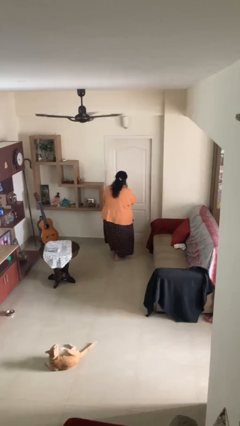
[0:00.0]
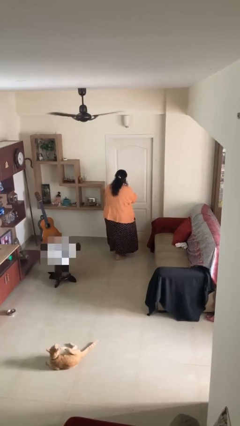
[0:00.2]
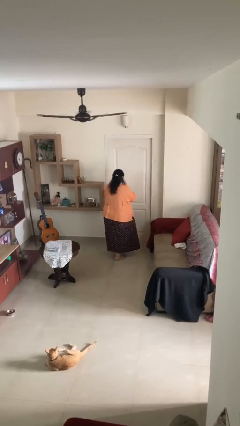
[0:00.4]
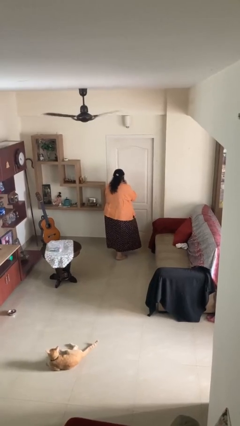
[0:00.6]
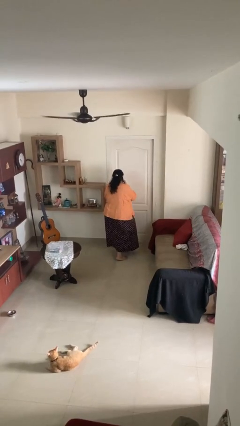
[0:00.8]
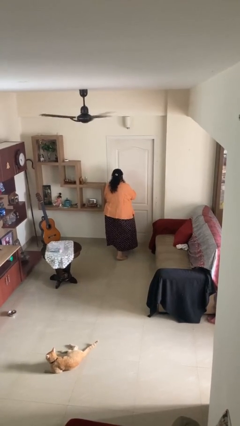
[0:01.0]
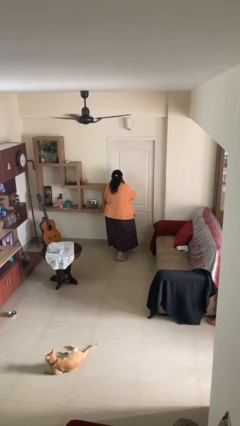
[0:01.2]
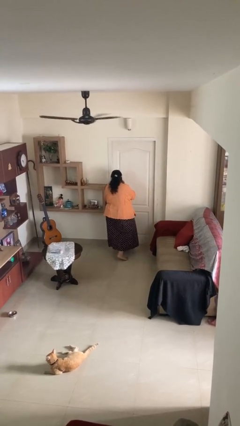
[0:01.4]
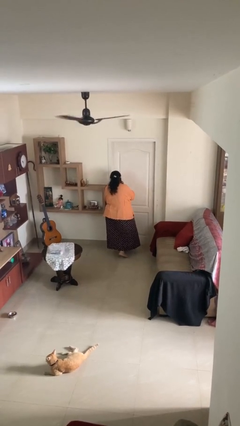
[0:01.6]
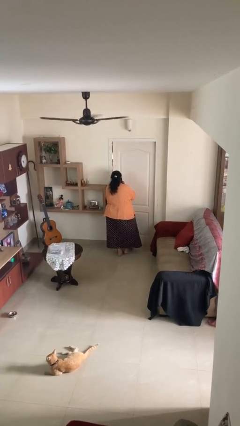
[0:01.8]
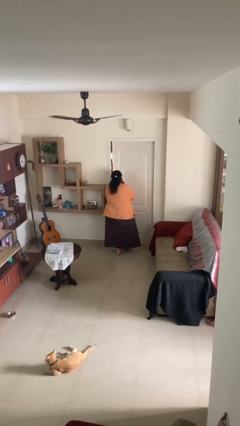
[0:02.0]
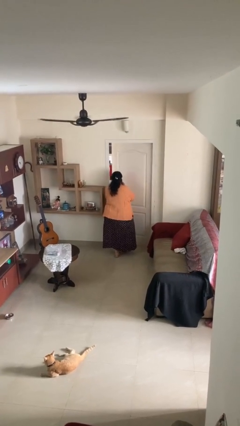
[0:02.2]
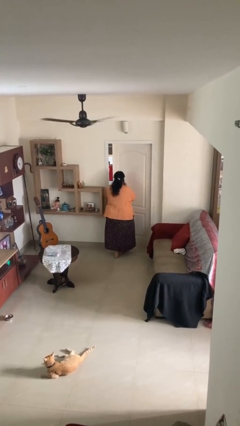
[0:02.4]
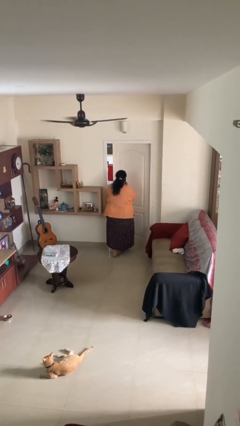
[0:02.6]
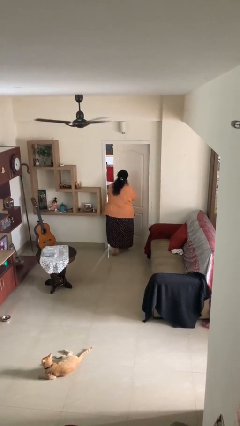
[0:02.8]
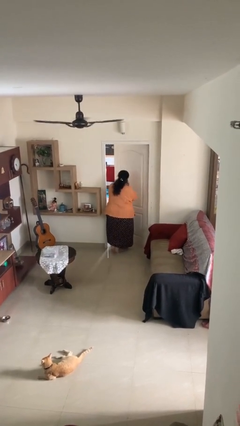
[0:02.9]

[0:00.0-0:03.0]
person opens facility door

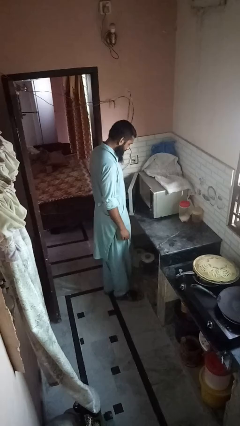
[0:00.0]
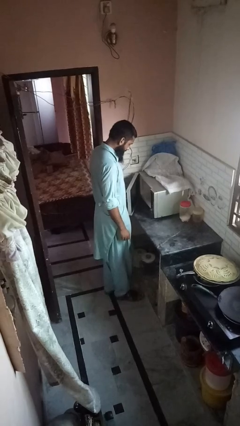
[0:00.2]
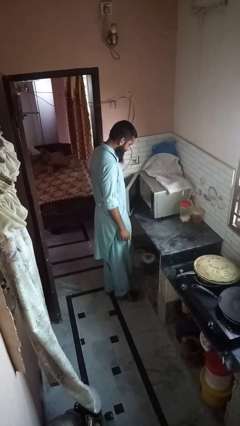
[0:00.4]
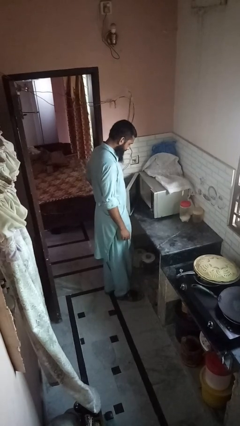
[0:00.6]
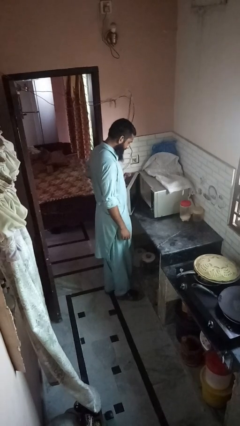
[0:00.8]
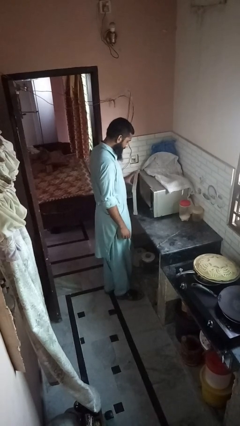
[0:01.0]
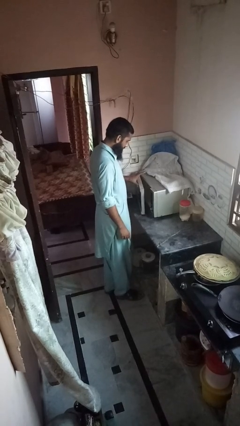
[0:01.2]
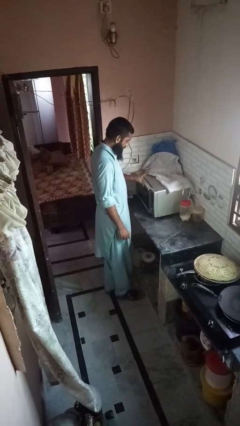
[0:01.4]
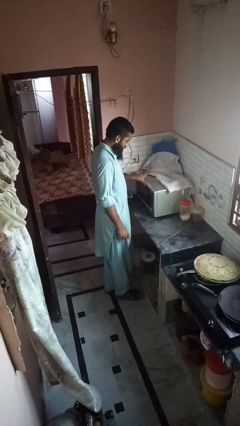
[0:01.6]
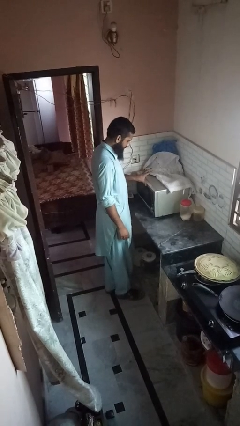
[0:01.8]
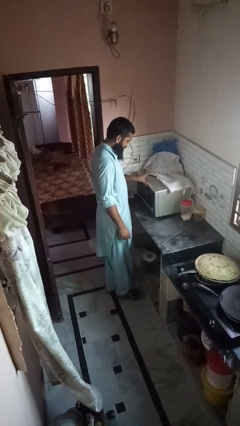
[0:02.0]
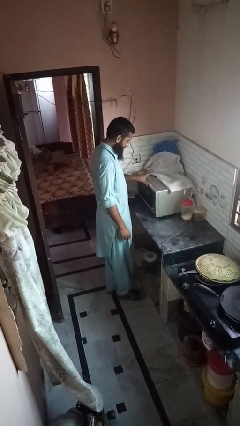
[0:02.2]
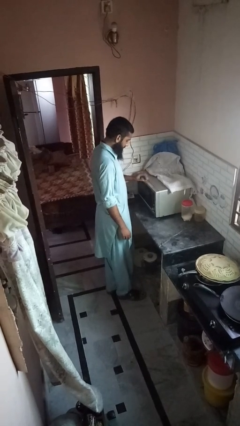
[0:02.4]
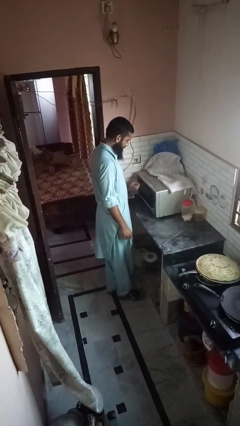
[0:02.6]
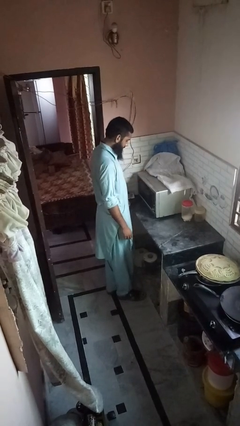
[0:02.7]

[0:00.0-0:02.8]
person closes microwave

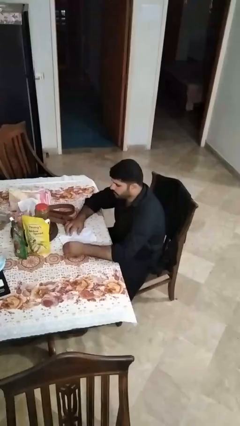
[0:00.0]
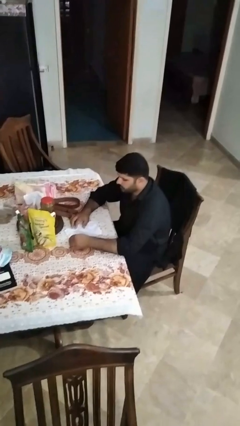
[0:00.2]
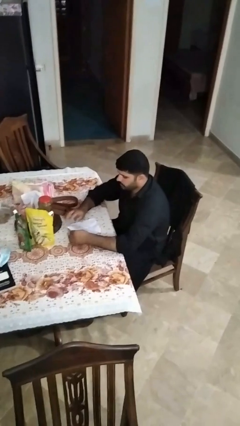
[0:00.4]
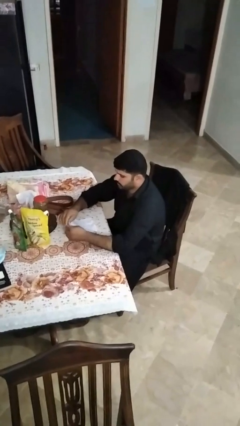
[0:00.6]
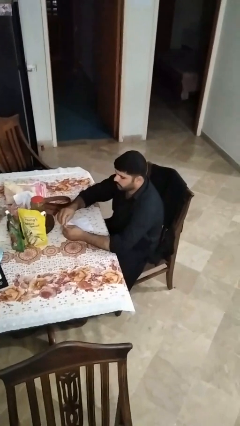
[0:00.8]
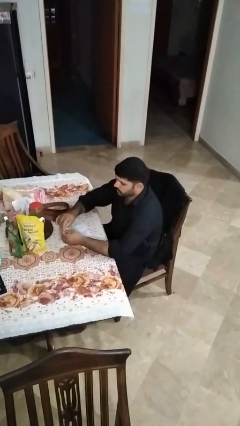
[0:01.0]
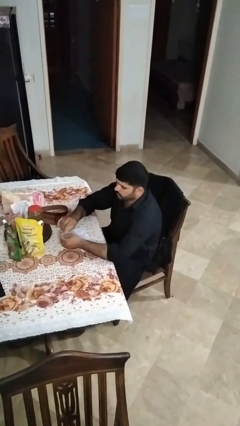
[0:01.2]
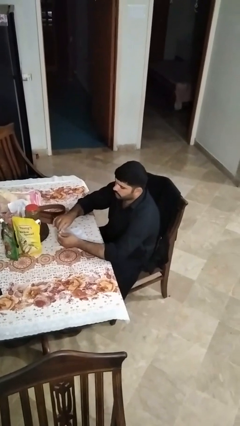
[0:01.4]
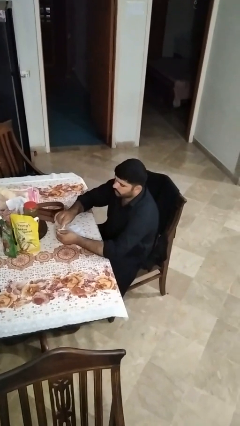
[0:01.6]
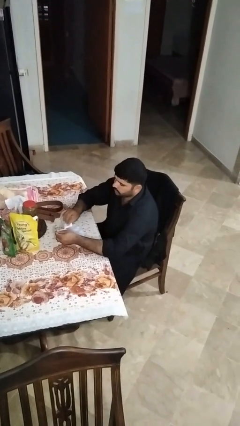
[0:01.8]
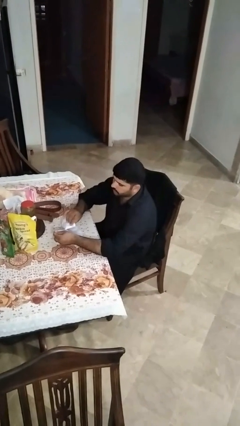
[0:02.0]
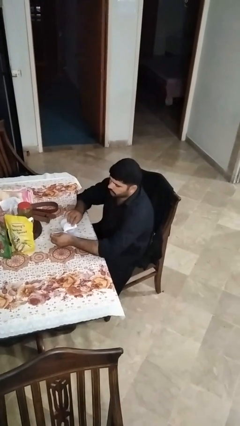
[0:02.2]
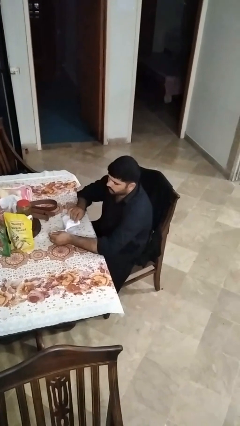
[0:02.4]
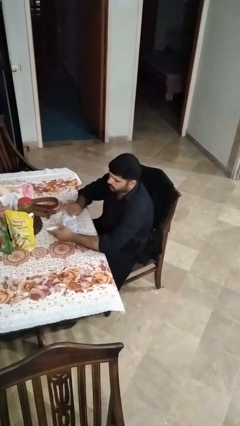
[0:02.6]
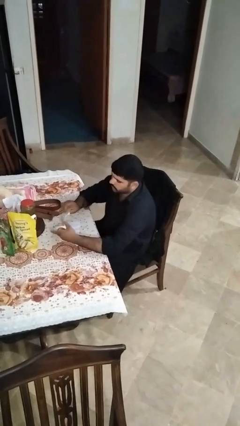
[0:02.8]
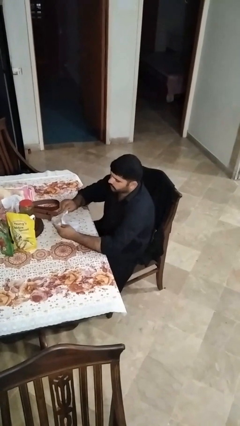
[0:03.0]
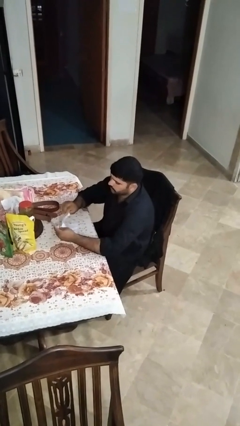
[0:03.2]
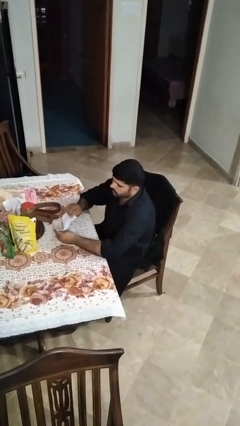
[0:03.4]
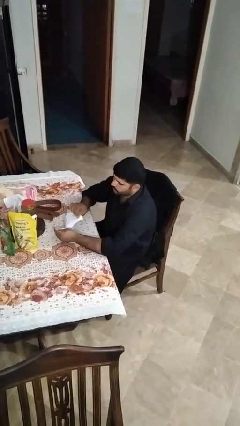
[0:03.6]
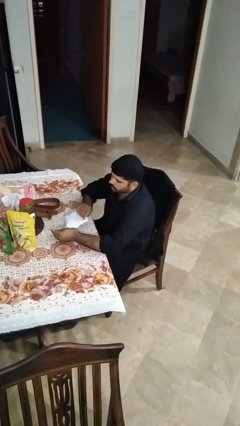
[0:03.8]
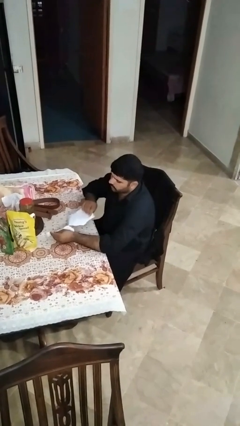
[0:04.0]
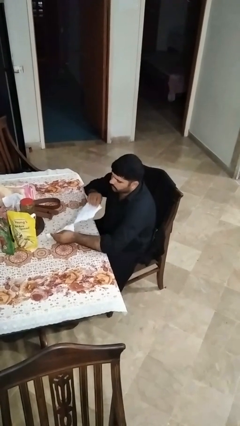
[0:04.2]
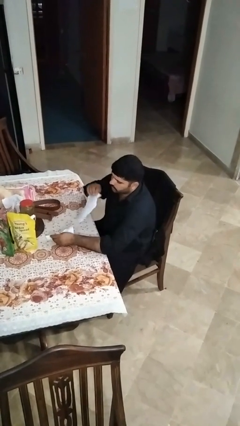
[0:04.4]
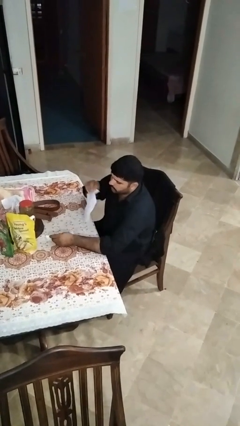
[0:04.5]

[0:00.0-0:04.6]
person tears paper

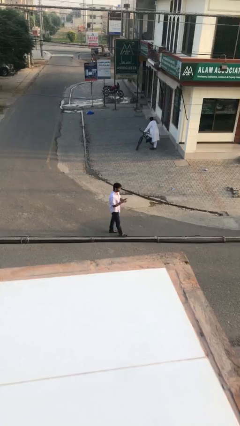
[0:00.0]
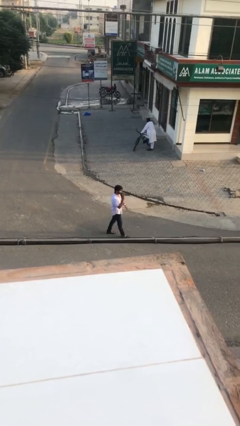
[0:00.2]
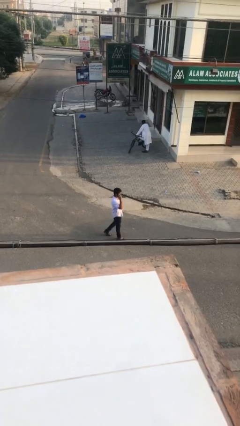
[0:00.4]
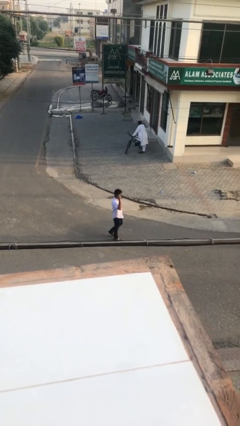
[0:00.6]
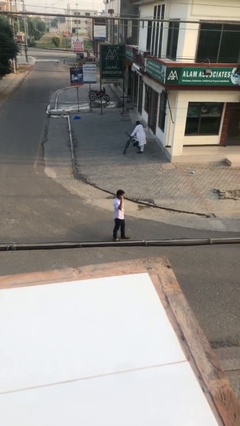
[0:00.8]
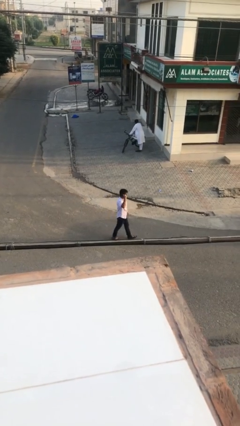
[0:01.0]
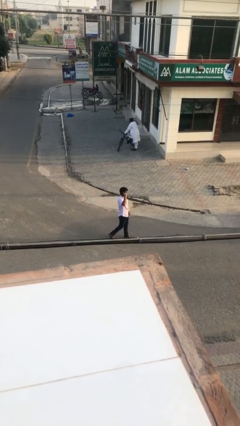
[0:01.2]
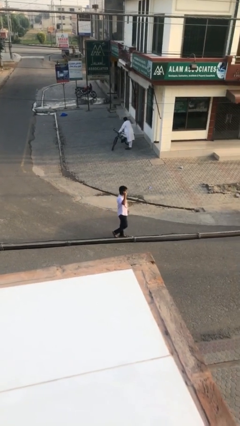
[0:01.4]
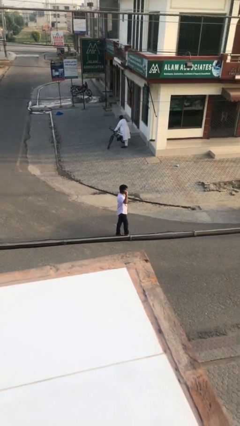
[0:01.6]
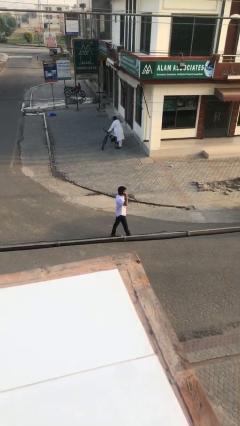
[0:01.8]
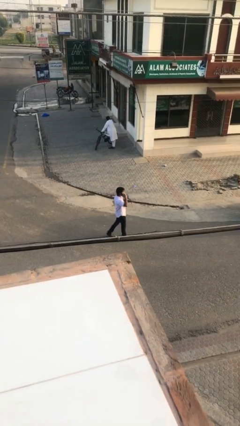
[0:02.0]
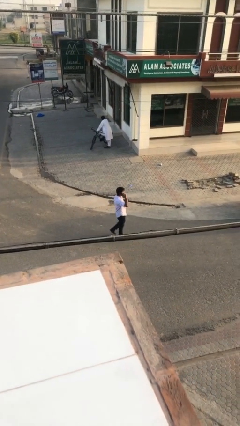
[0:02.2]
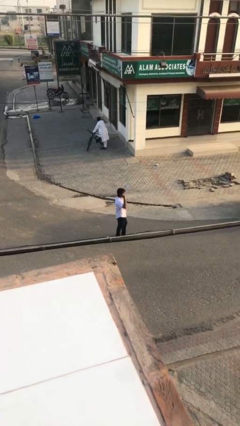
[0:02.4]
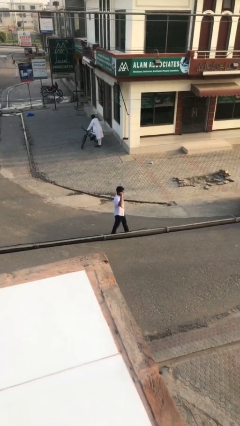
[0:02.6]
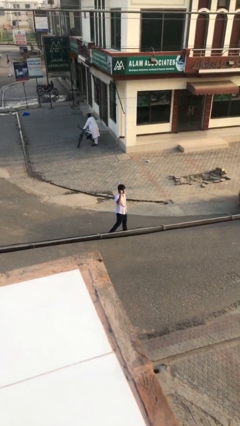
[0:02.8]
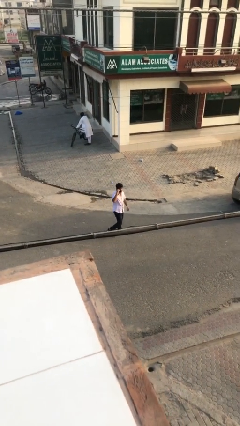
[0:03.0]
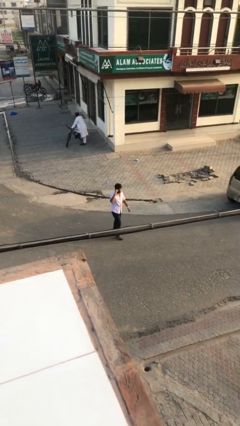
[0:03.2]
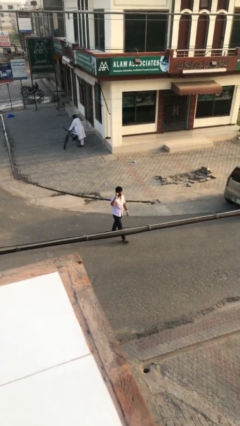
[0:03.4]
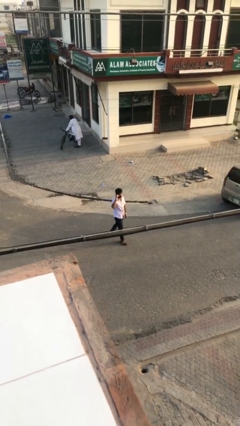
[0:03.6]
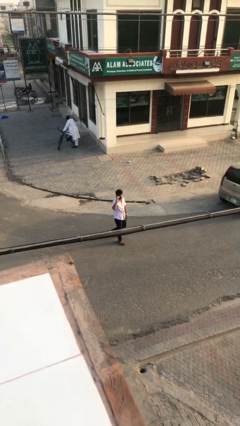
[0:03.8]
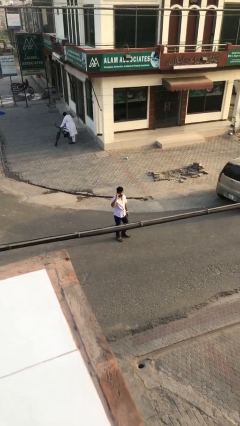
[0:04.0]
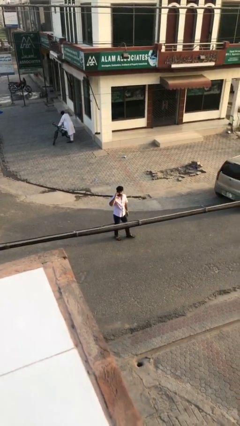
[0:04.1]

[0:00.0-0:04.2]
person talks on phone

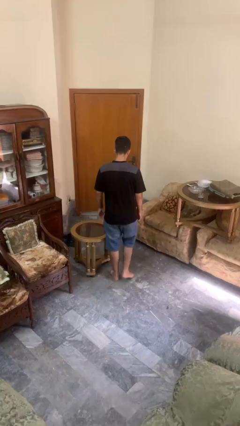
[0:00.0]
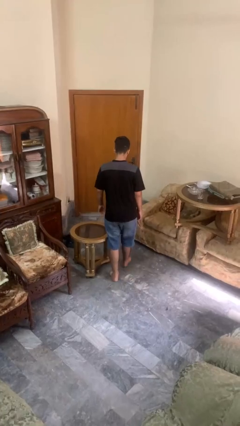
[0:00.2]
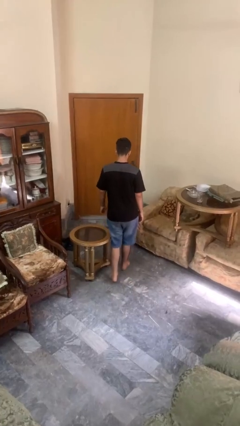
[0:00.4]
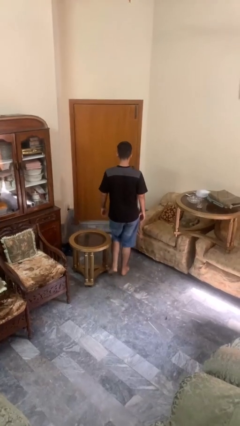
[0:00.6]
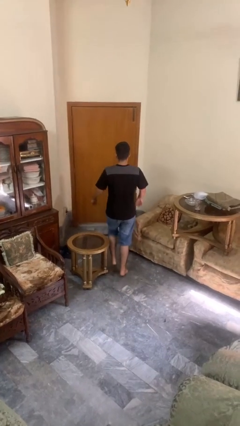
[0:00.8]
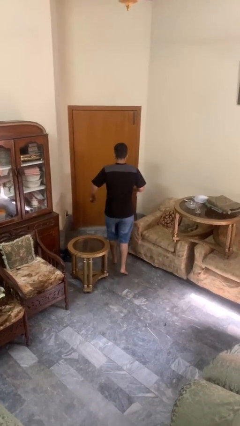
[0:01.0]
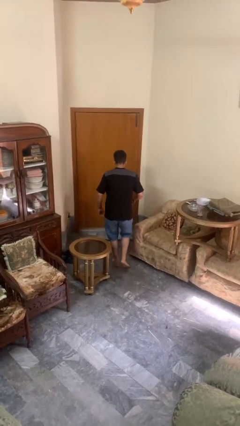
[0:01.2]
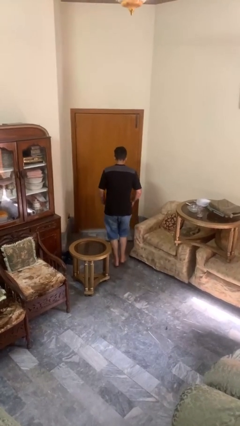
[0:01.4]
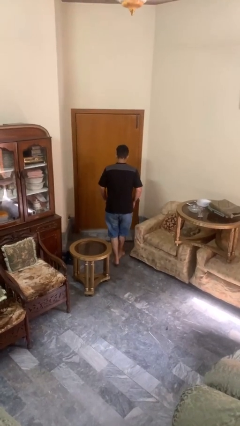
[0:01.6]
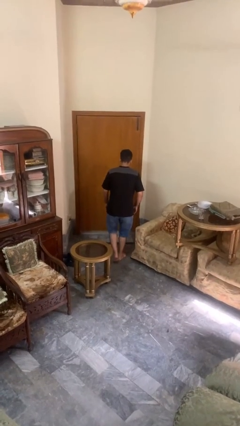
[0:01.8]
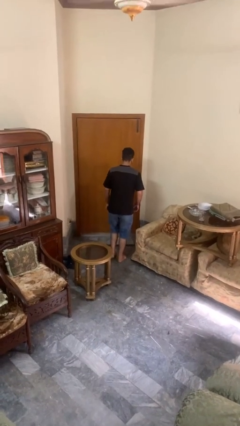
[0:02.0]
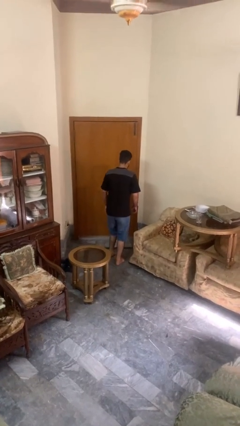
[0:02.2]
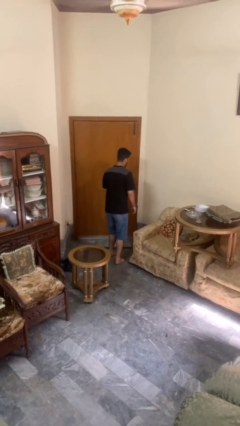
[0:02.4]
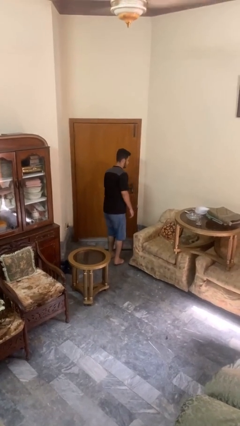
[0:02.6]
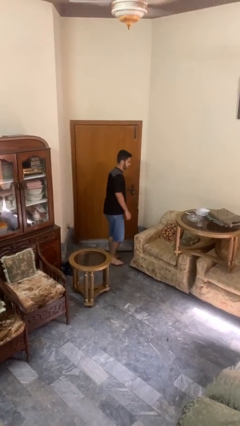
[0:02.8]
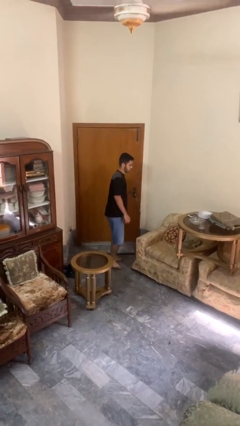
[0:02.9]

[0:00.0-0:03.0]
person stubs toe

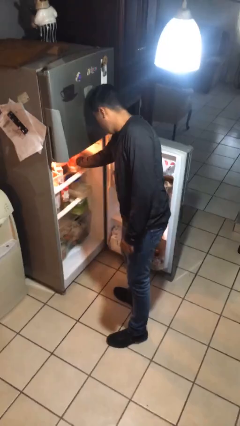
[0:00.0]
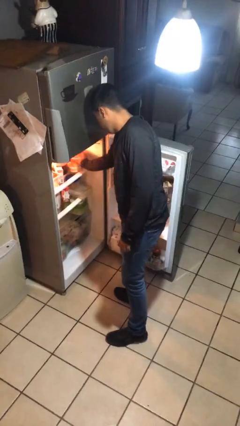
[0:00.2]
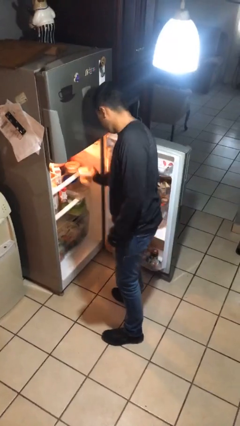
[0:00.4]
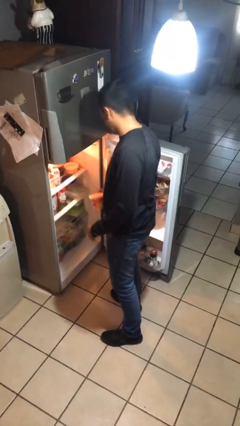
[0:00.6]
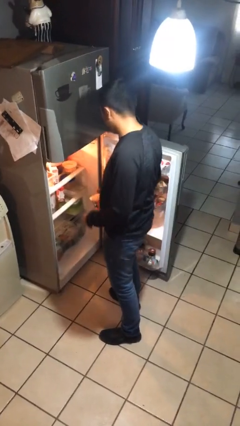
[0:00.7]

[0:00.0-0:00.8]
person puts object into refrigerator
